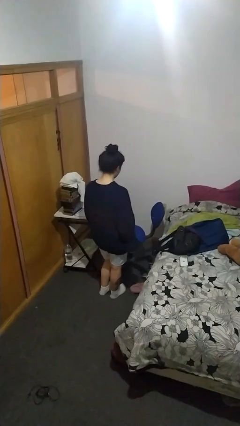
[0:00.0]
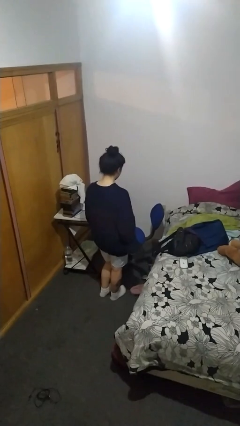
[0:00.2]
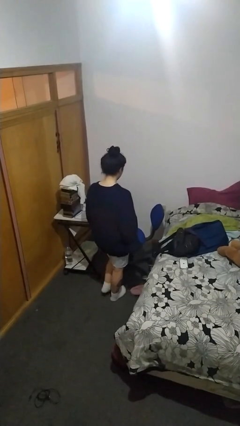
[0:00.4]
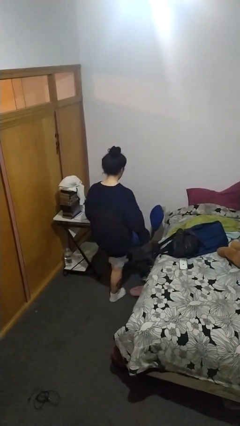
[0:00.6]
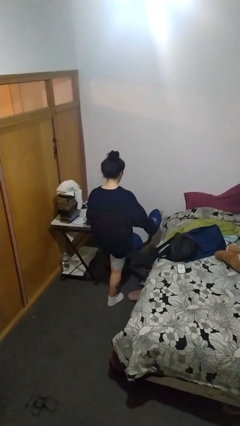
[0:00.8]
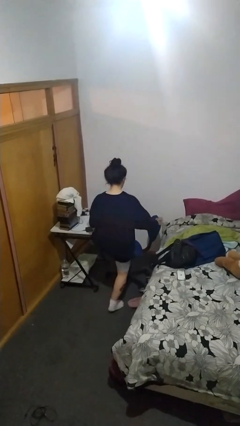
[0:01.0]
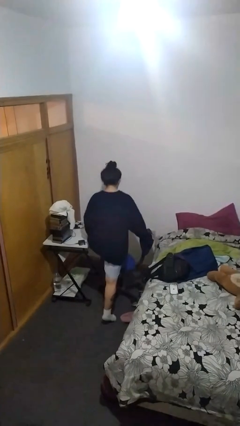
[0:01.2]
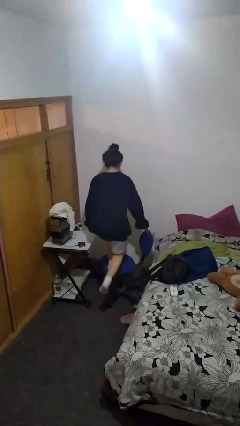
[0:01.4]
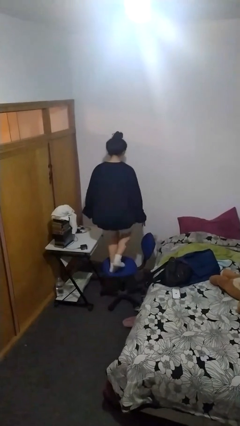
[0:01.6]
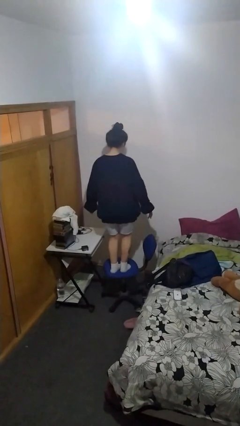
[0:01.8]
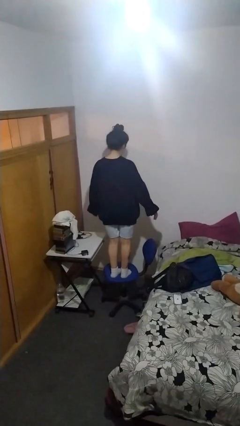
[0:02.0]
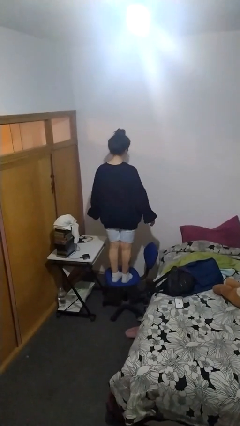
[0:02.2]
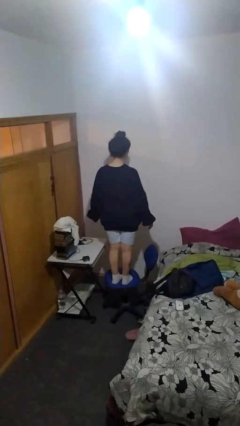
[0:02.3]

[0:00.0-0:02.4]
person climbs on chair

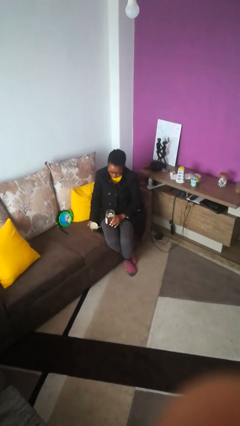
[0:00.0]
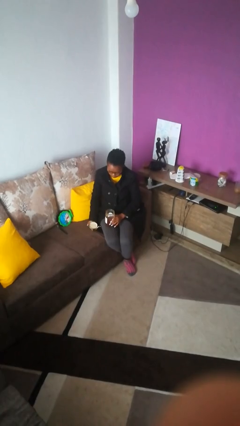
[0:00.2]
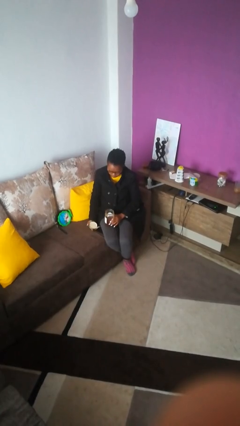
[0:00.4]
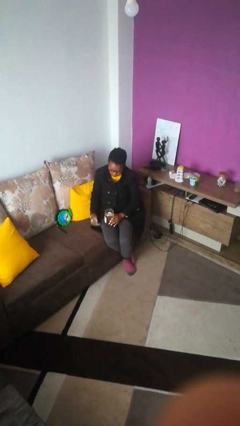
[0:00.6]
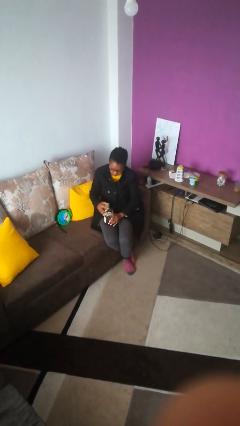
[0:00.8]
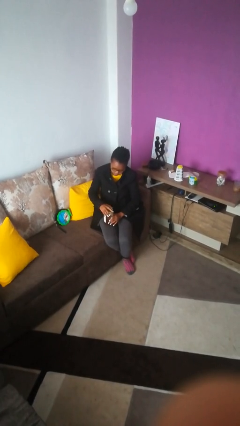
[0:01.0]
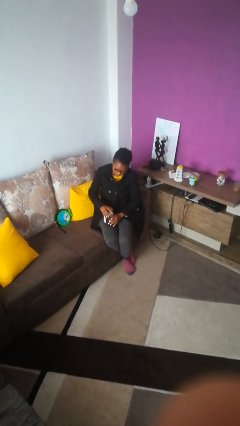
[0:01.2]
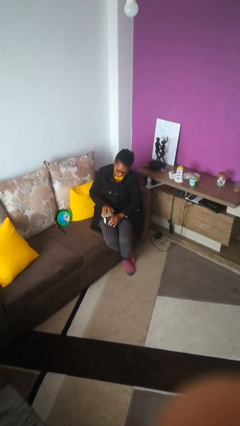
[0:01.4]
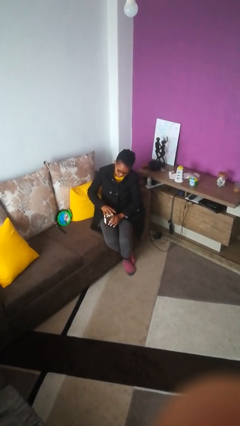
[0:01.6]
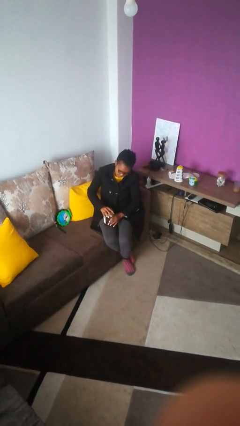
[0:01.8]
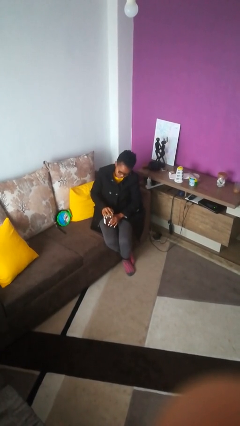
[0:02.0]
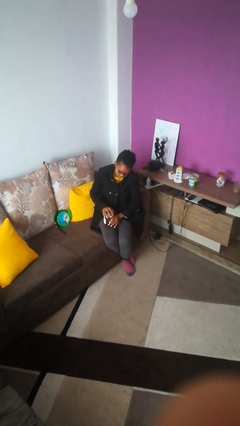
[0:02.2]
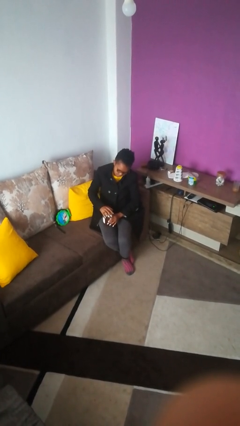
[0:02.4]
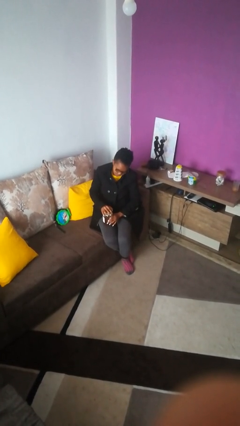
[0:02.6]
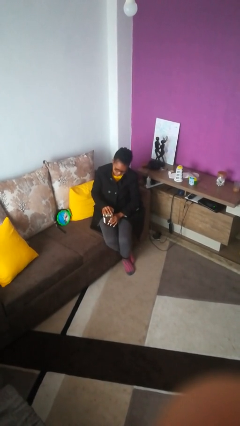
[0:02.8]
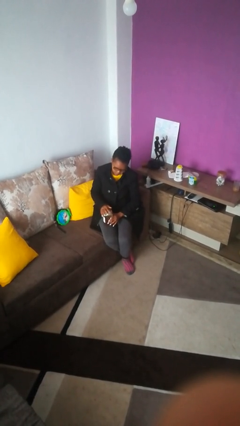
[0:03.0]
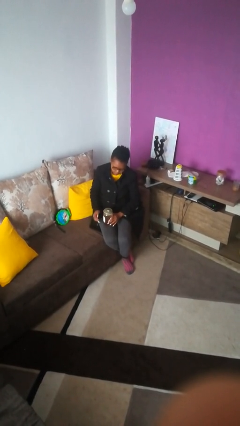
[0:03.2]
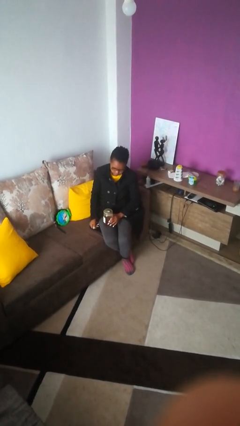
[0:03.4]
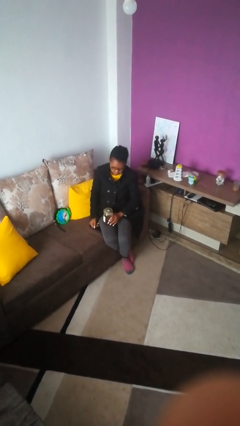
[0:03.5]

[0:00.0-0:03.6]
person closes jar

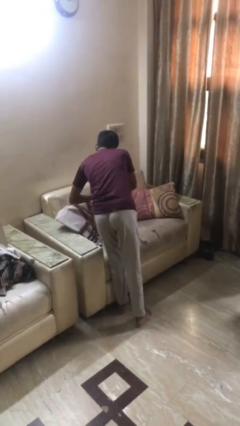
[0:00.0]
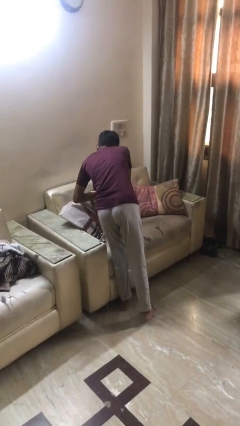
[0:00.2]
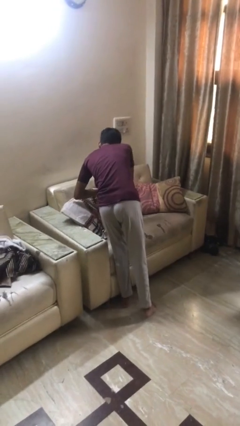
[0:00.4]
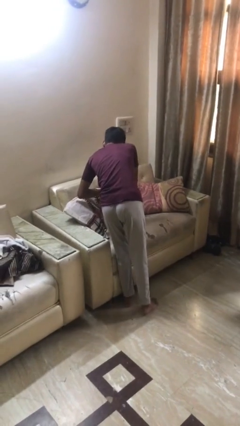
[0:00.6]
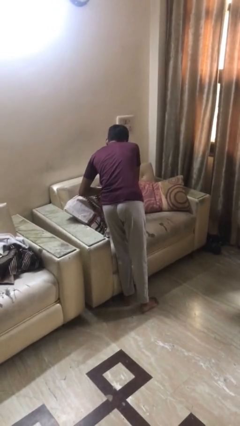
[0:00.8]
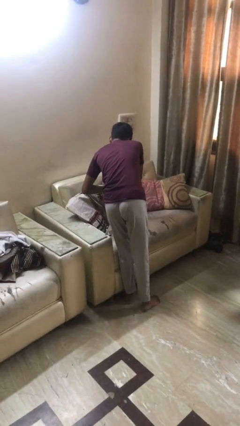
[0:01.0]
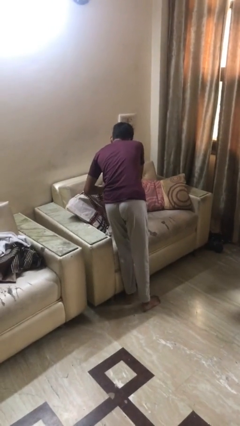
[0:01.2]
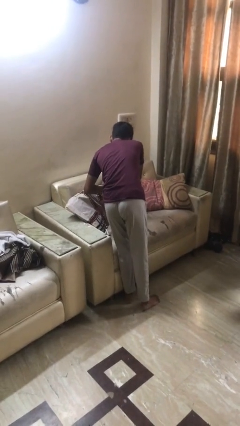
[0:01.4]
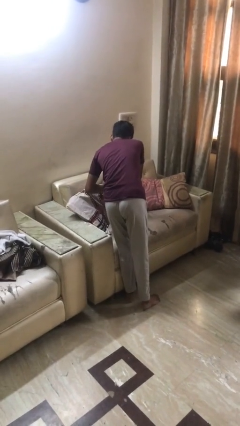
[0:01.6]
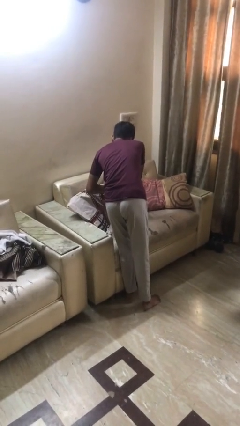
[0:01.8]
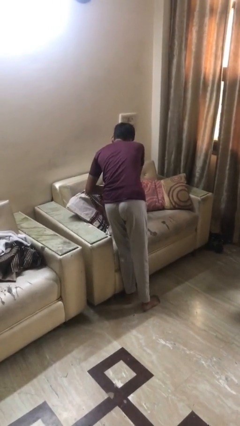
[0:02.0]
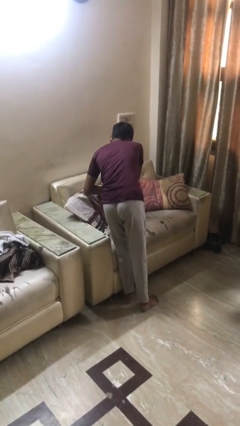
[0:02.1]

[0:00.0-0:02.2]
person searches in couch

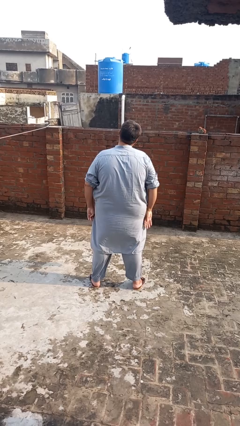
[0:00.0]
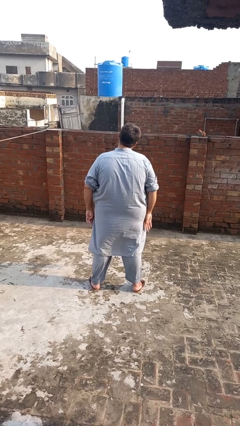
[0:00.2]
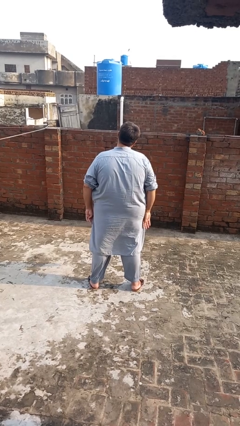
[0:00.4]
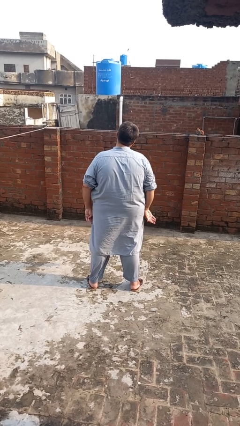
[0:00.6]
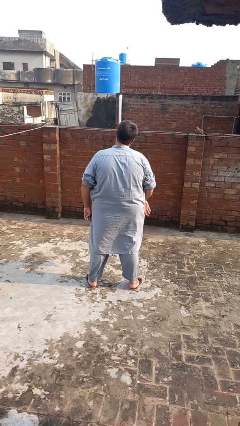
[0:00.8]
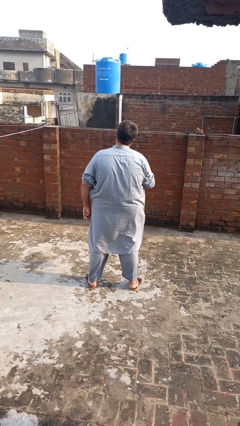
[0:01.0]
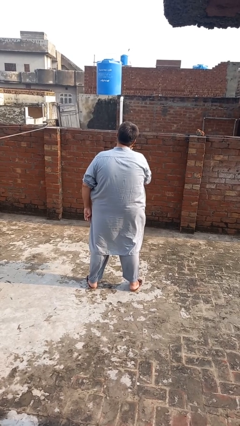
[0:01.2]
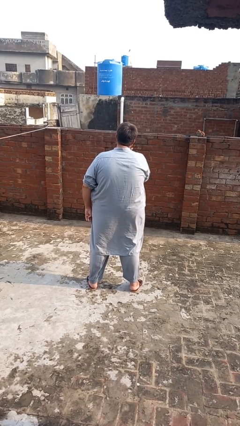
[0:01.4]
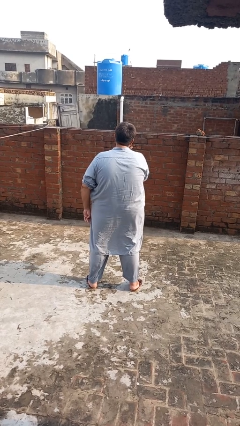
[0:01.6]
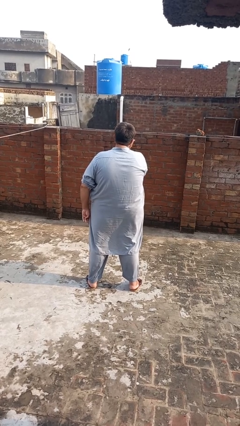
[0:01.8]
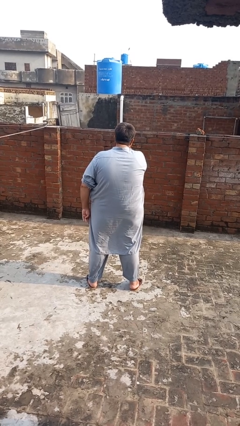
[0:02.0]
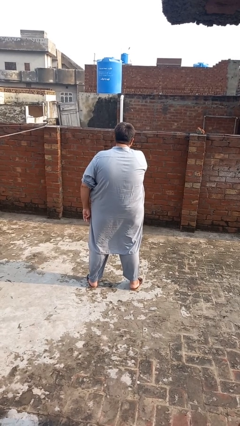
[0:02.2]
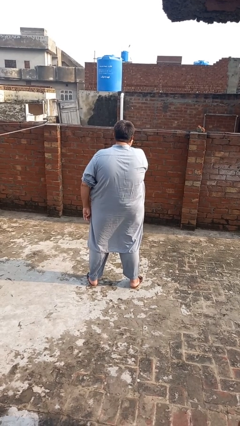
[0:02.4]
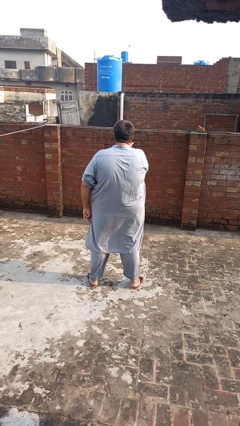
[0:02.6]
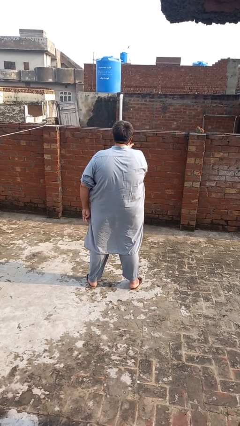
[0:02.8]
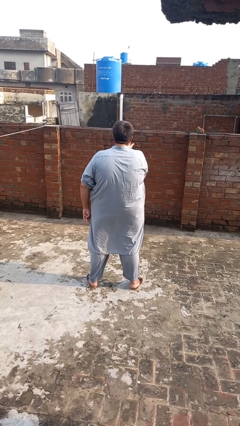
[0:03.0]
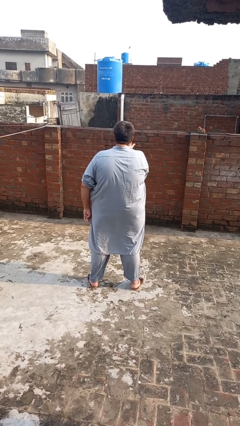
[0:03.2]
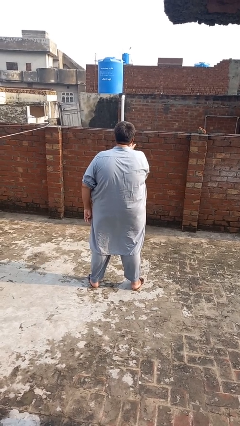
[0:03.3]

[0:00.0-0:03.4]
person gestures blow kiss

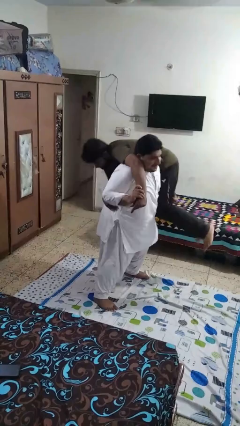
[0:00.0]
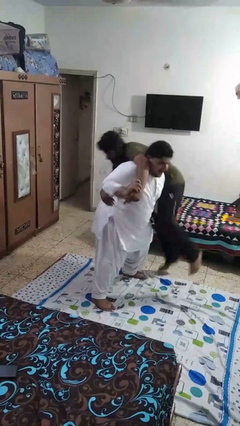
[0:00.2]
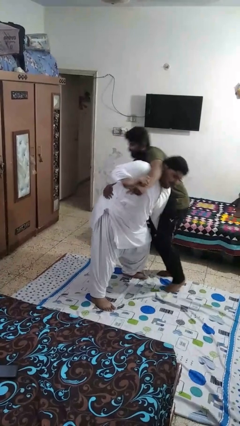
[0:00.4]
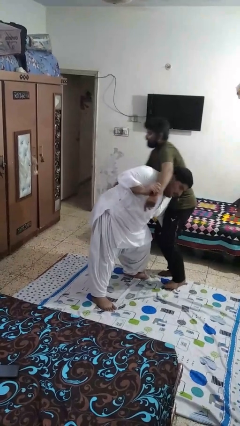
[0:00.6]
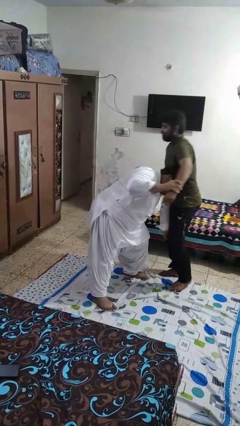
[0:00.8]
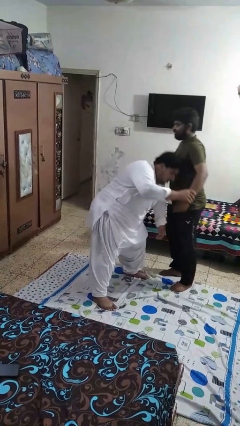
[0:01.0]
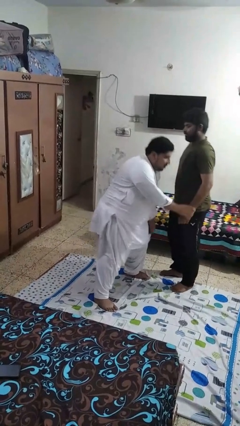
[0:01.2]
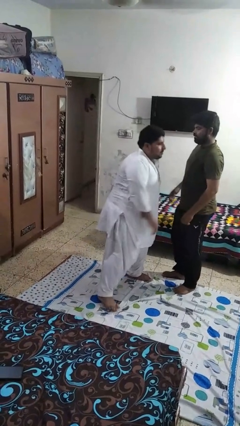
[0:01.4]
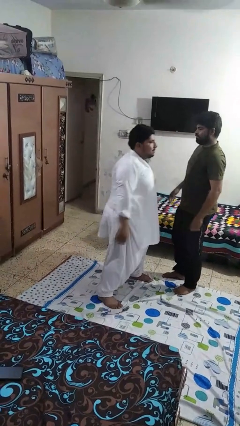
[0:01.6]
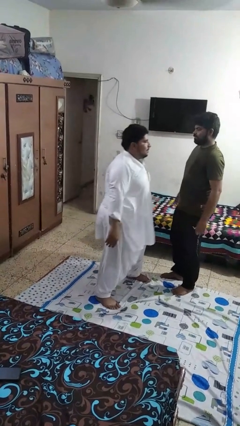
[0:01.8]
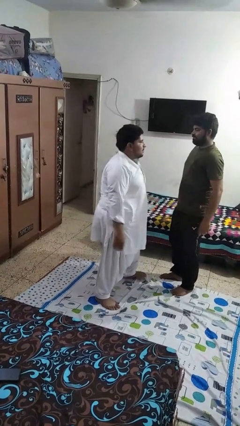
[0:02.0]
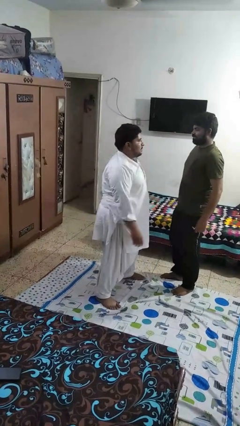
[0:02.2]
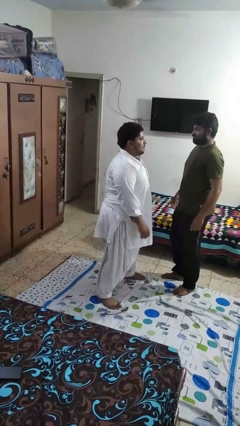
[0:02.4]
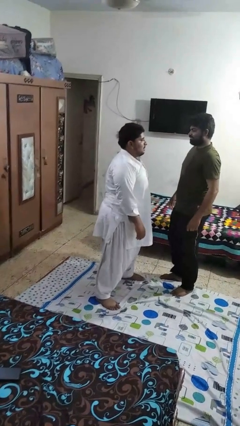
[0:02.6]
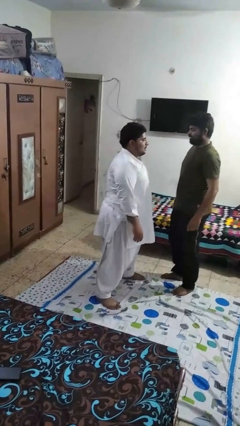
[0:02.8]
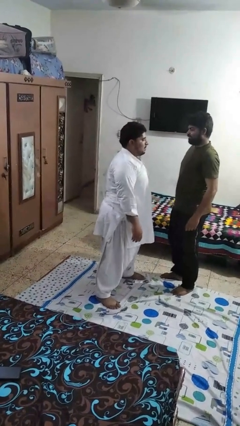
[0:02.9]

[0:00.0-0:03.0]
person puts down person

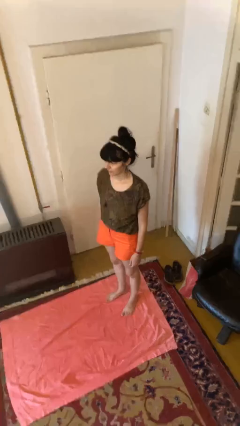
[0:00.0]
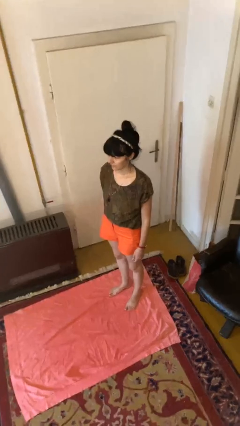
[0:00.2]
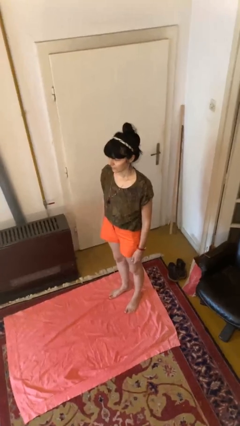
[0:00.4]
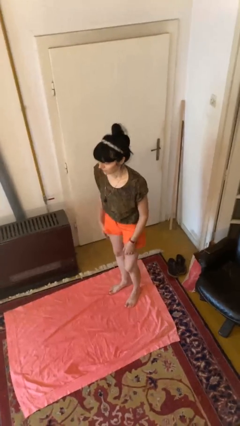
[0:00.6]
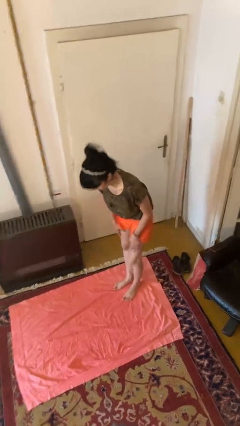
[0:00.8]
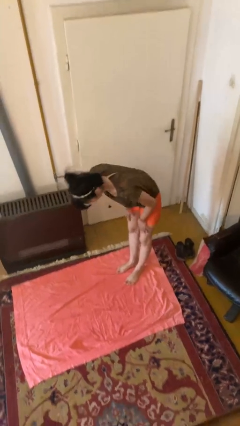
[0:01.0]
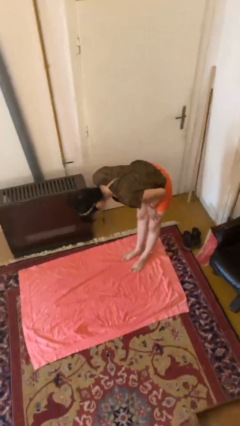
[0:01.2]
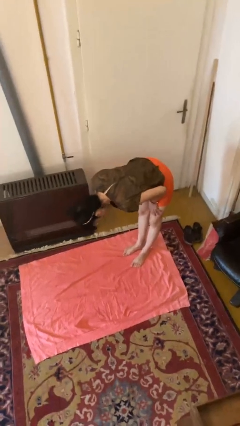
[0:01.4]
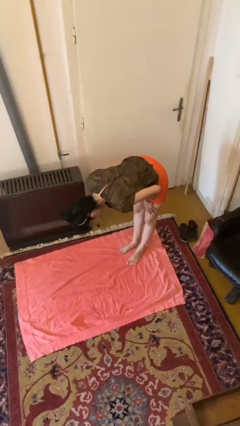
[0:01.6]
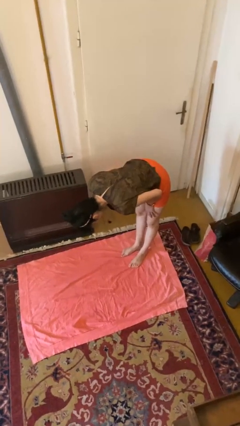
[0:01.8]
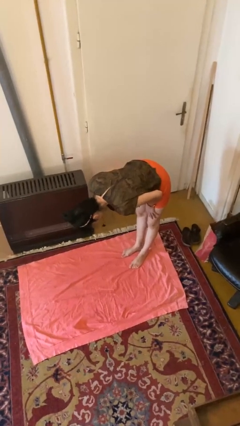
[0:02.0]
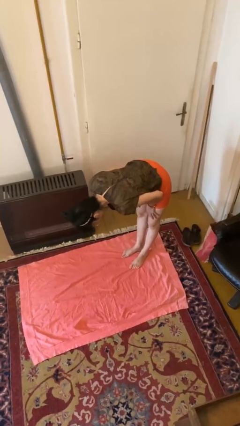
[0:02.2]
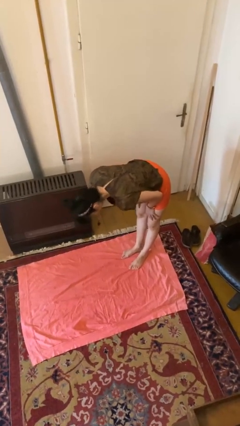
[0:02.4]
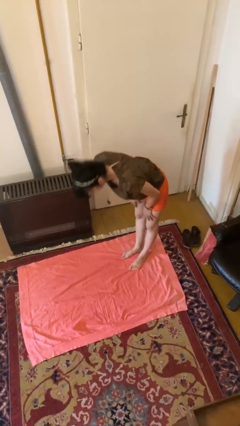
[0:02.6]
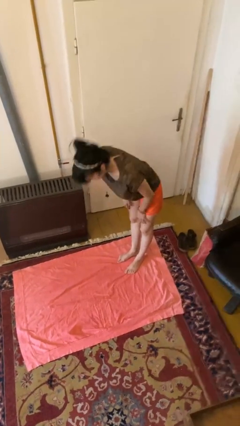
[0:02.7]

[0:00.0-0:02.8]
person bows

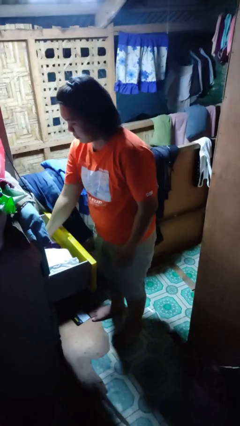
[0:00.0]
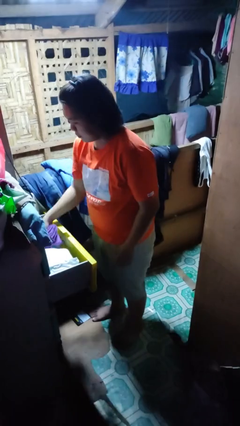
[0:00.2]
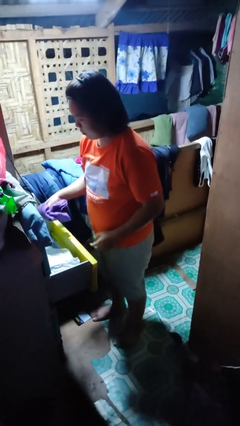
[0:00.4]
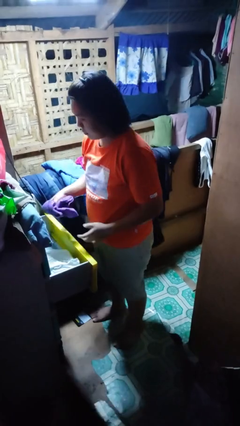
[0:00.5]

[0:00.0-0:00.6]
person takes clothes from dresser
